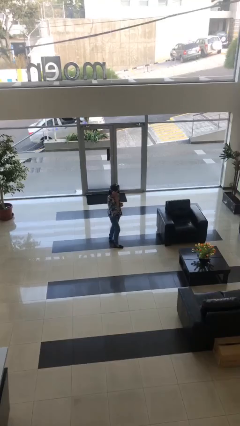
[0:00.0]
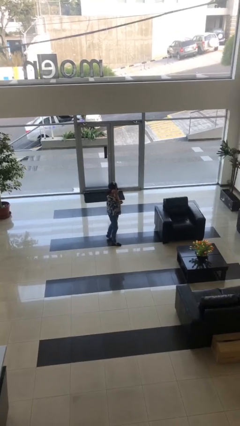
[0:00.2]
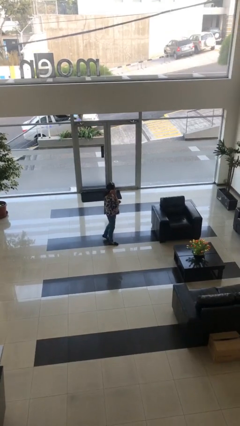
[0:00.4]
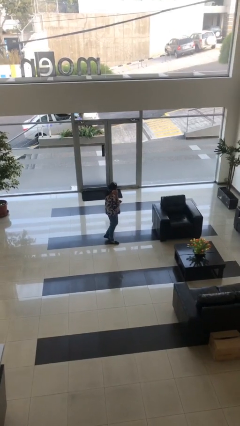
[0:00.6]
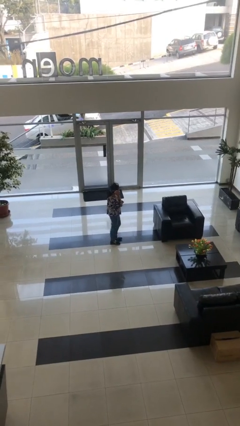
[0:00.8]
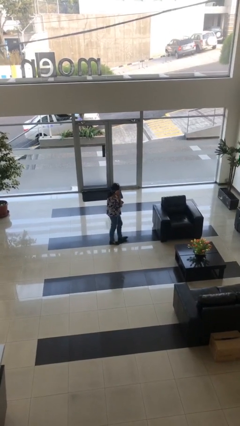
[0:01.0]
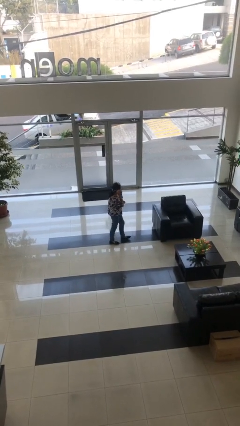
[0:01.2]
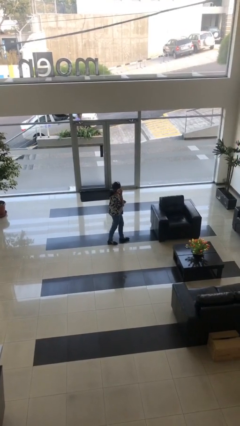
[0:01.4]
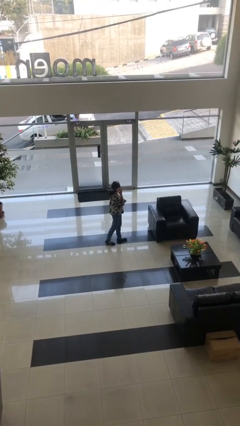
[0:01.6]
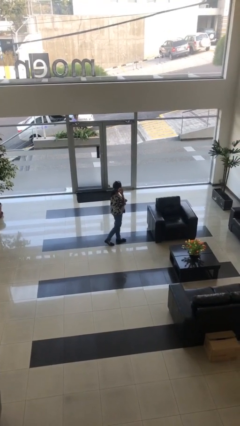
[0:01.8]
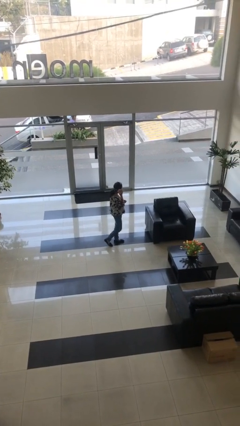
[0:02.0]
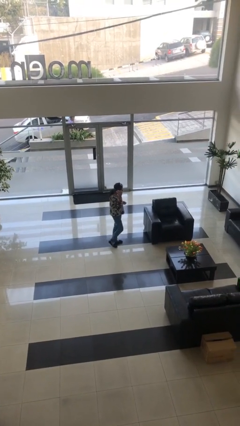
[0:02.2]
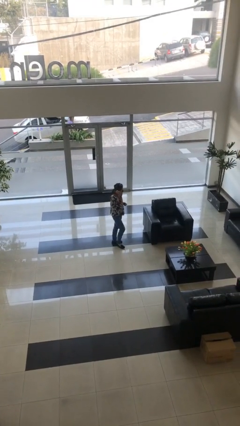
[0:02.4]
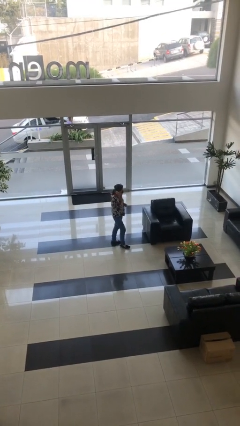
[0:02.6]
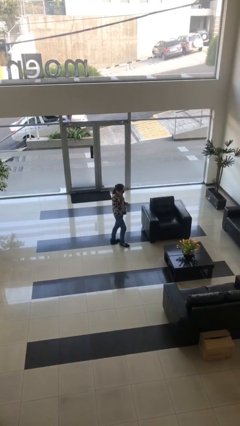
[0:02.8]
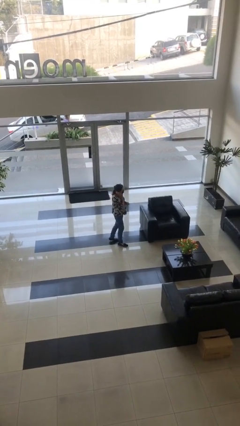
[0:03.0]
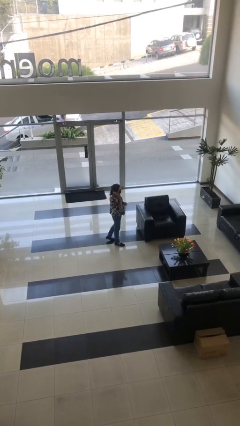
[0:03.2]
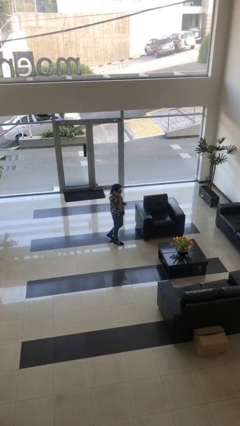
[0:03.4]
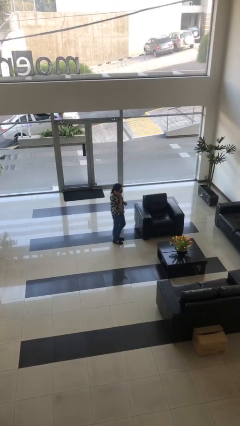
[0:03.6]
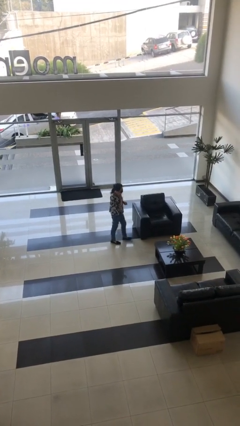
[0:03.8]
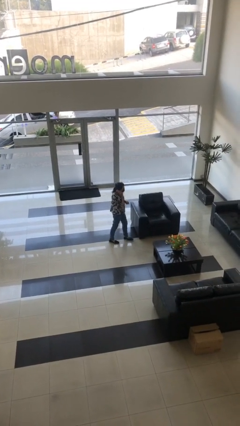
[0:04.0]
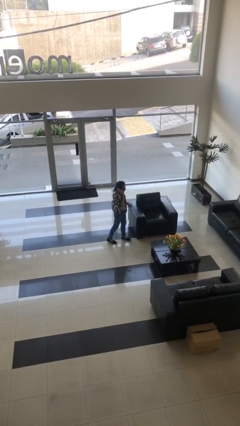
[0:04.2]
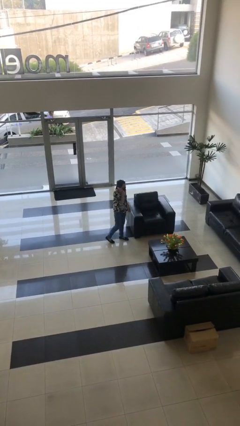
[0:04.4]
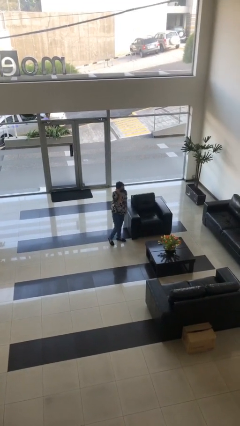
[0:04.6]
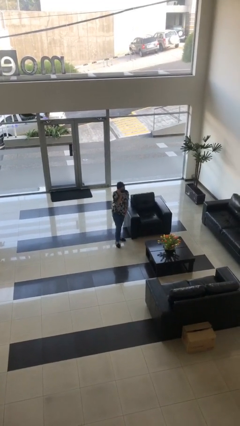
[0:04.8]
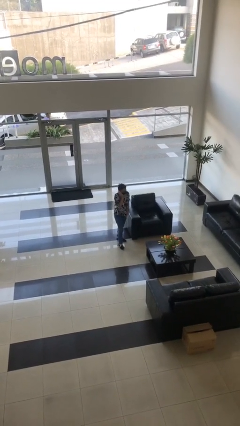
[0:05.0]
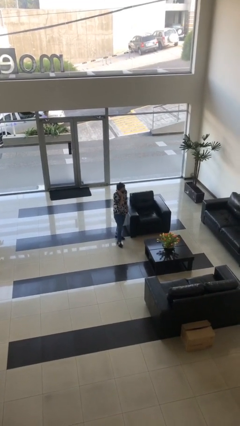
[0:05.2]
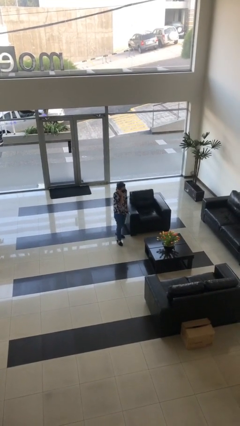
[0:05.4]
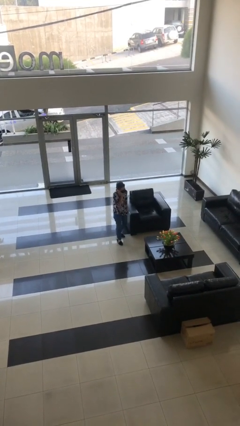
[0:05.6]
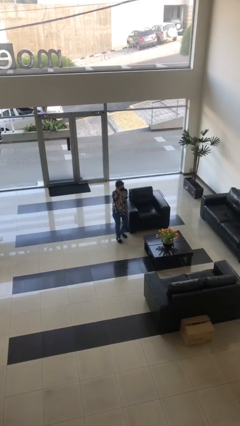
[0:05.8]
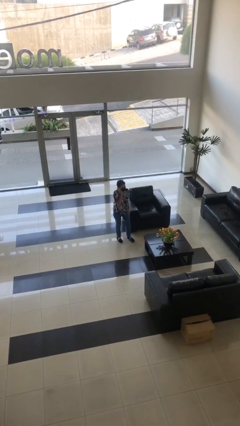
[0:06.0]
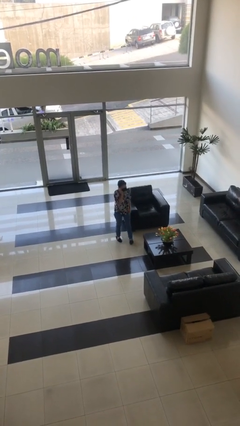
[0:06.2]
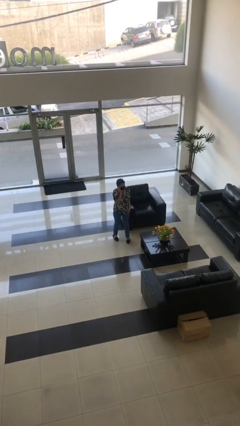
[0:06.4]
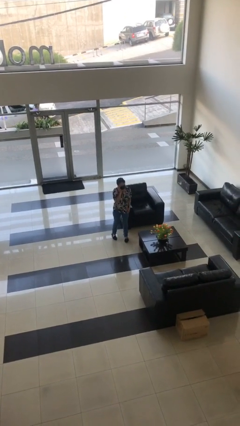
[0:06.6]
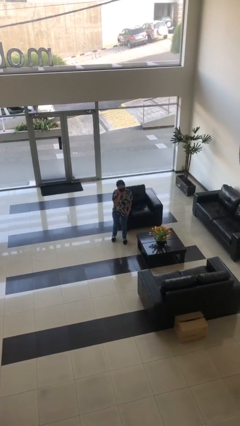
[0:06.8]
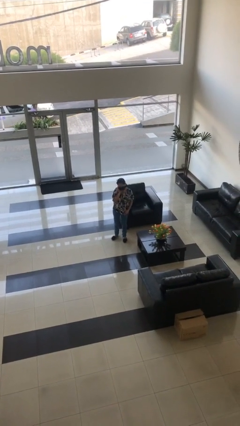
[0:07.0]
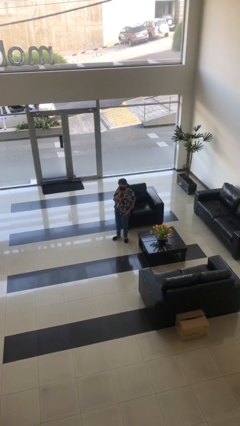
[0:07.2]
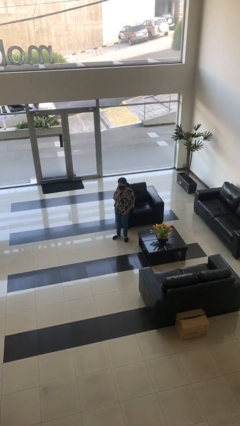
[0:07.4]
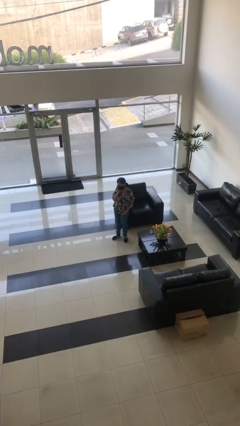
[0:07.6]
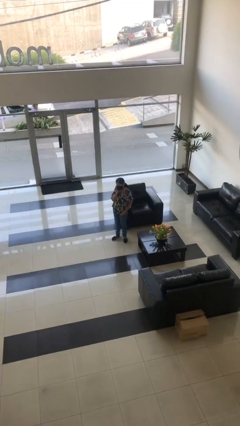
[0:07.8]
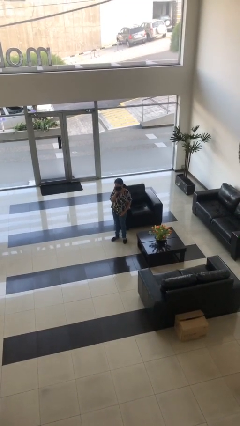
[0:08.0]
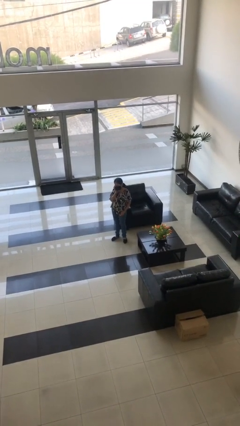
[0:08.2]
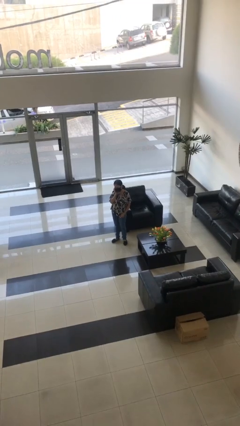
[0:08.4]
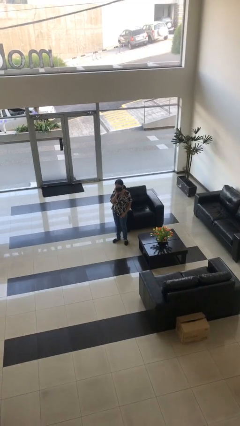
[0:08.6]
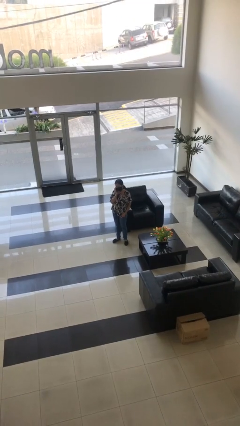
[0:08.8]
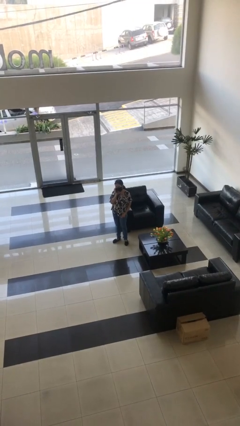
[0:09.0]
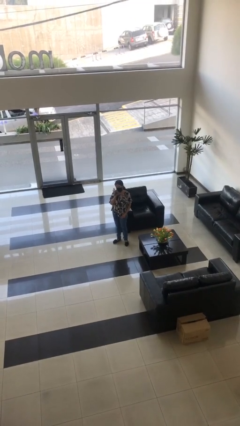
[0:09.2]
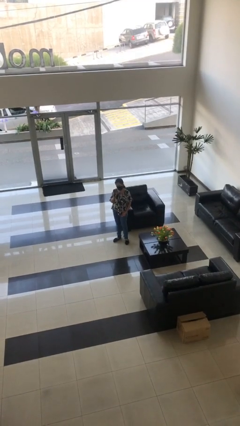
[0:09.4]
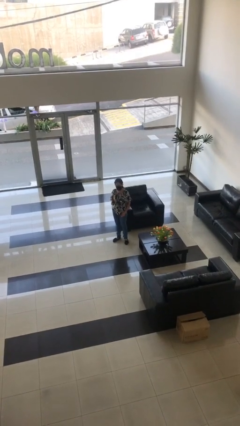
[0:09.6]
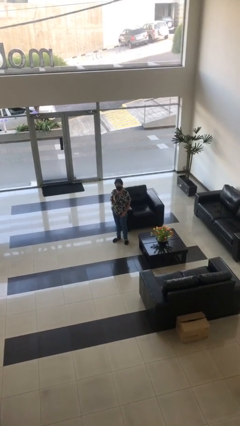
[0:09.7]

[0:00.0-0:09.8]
person talks on phone

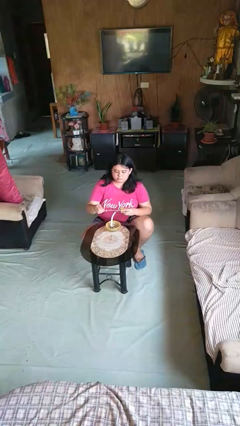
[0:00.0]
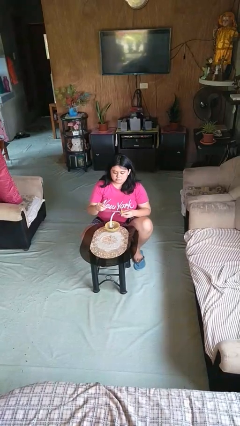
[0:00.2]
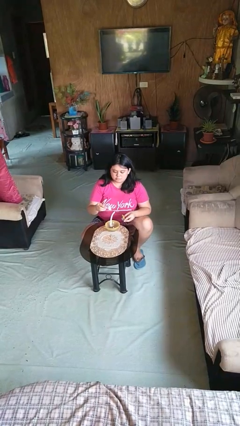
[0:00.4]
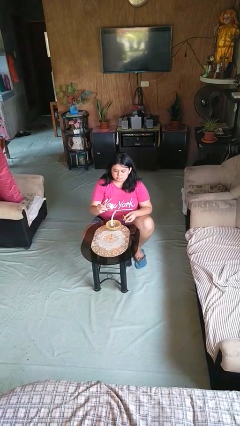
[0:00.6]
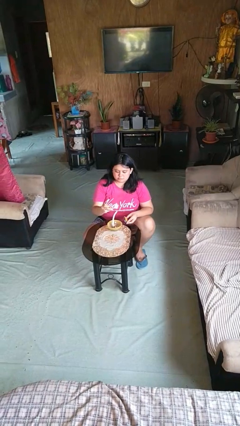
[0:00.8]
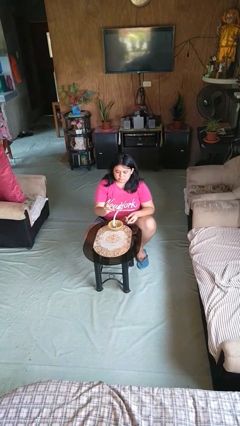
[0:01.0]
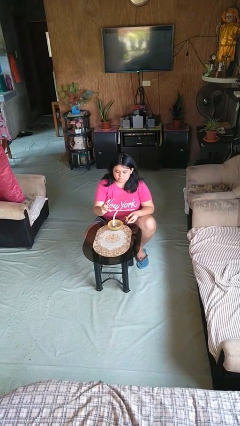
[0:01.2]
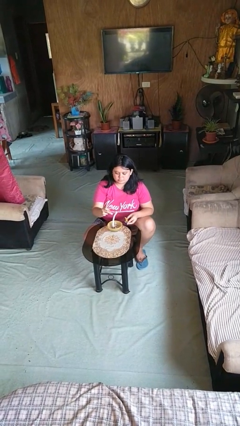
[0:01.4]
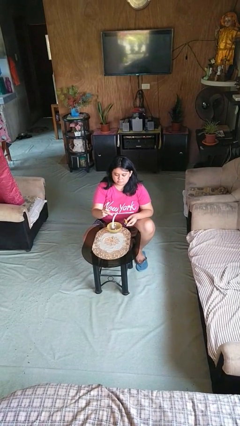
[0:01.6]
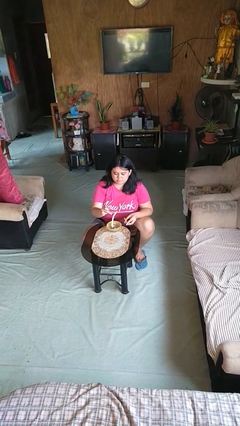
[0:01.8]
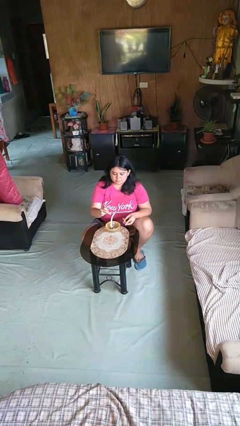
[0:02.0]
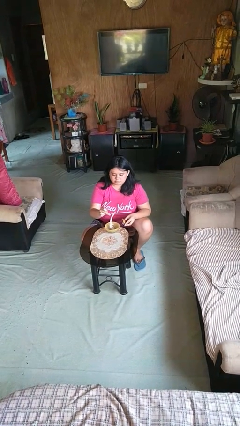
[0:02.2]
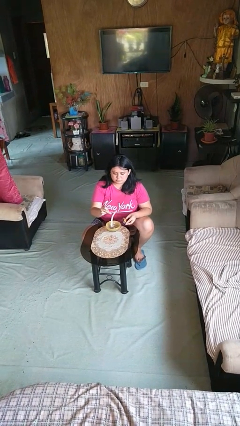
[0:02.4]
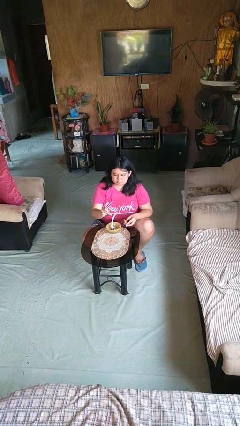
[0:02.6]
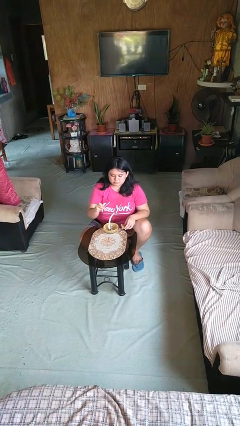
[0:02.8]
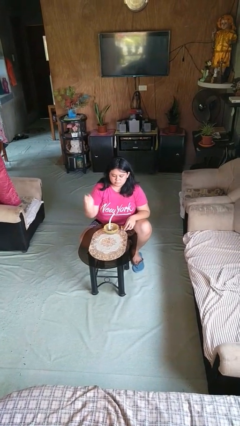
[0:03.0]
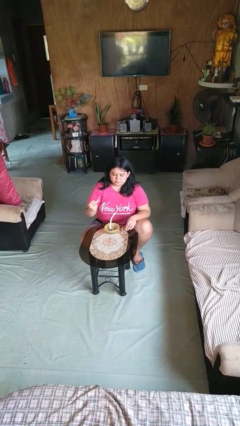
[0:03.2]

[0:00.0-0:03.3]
person lights candle

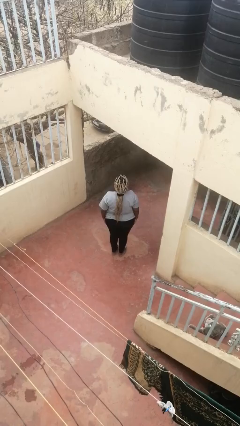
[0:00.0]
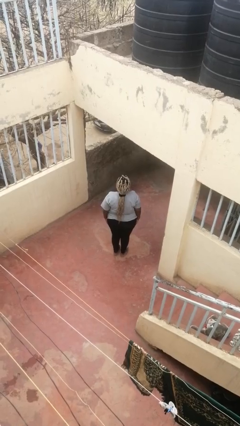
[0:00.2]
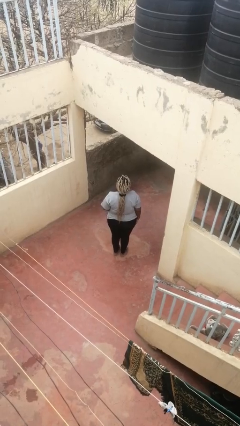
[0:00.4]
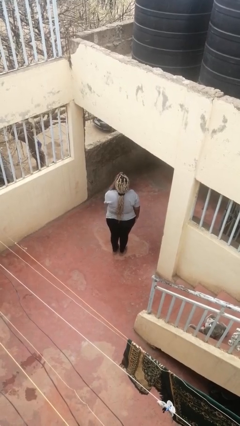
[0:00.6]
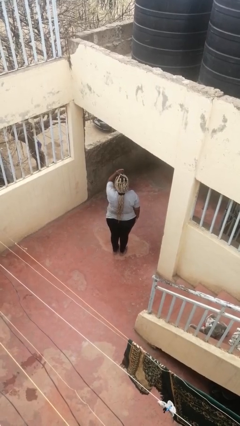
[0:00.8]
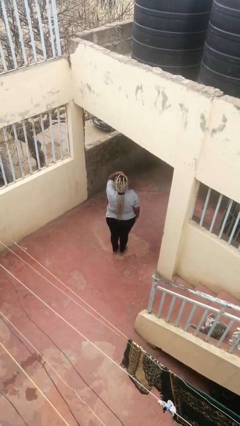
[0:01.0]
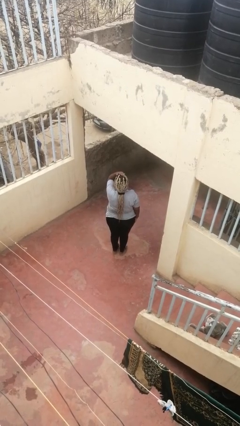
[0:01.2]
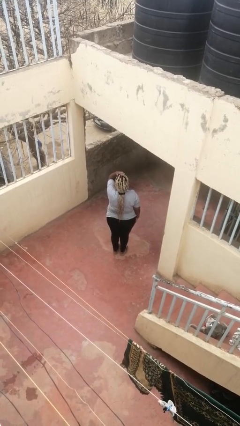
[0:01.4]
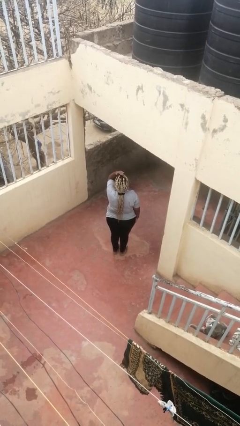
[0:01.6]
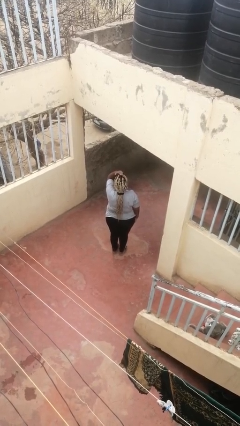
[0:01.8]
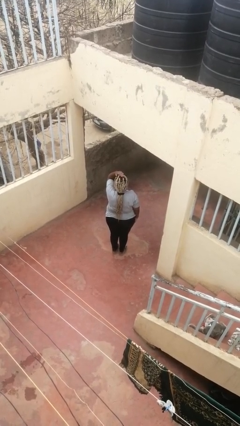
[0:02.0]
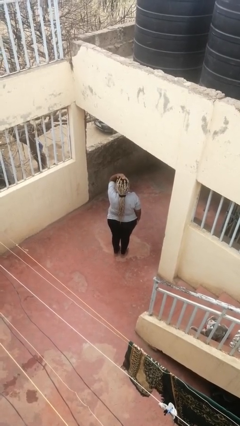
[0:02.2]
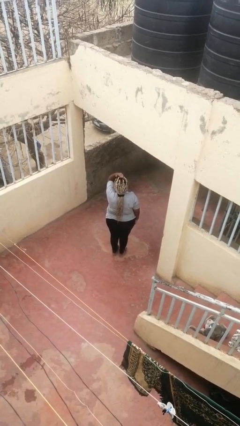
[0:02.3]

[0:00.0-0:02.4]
person pats head

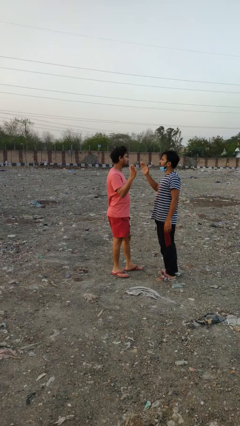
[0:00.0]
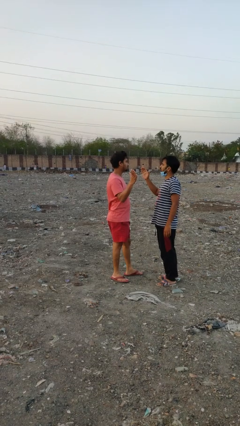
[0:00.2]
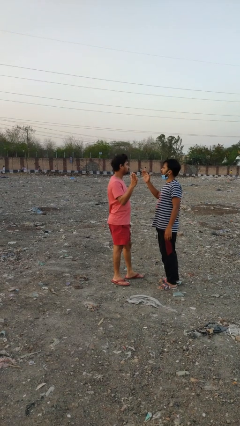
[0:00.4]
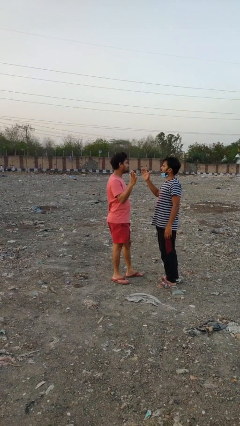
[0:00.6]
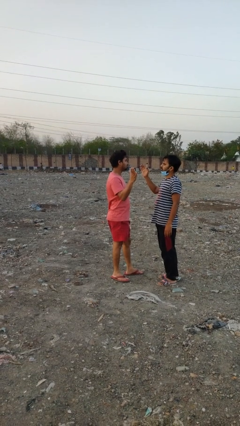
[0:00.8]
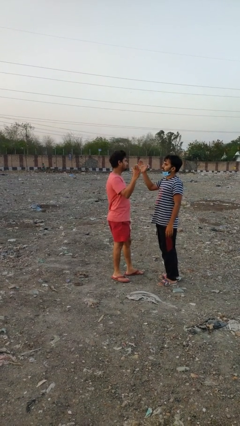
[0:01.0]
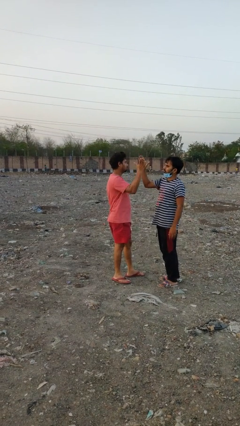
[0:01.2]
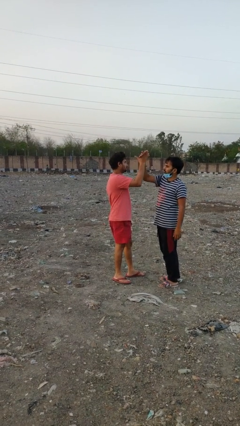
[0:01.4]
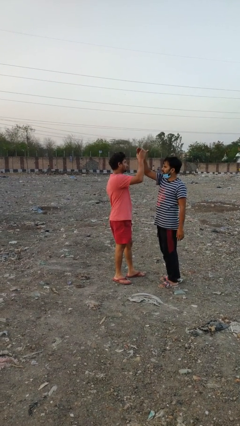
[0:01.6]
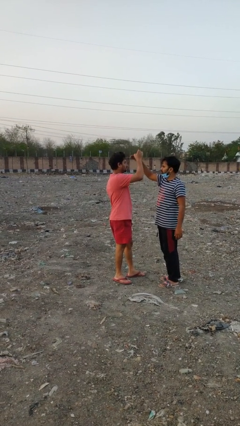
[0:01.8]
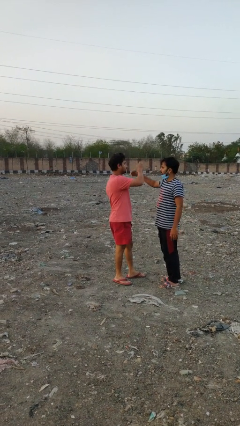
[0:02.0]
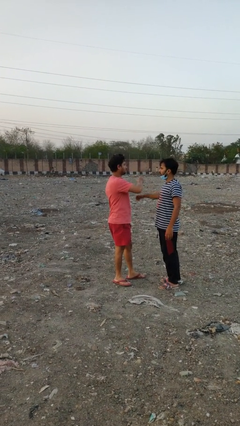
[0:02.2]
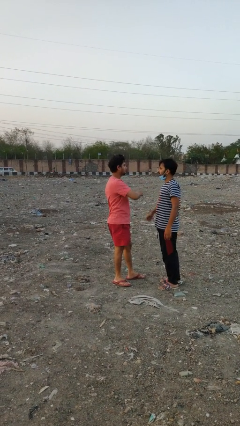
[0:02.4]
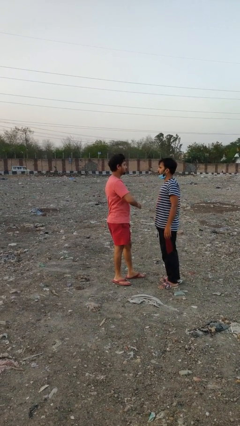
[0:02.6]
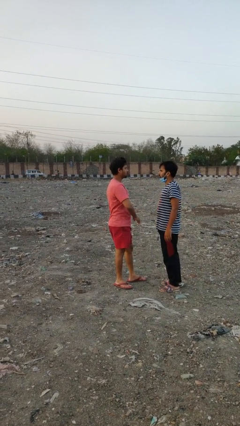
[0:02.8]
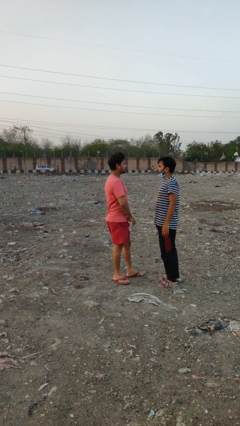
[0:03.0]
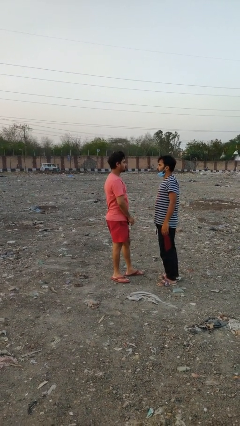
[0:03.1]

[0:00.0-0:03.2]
person highfives hand
